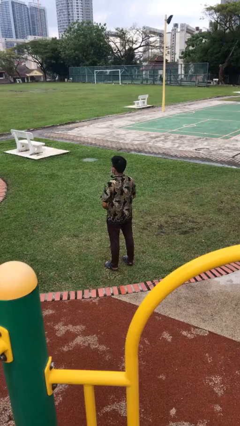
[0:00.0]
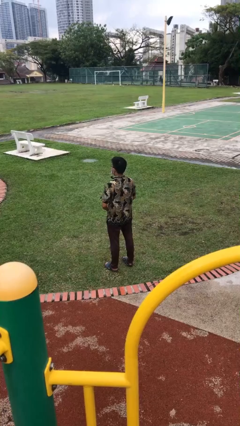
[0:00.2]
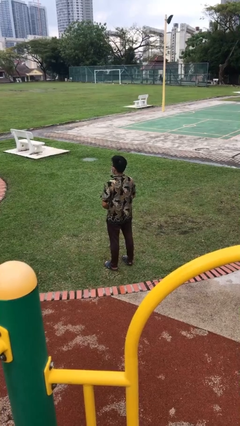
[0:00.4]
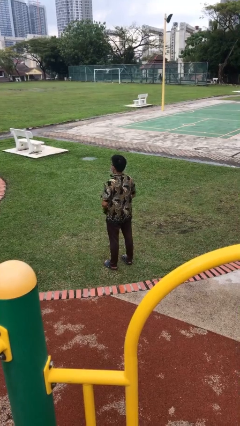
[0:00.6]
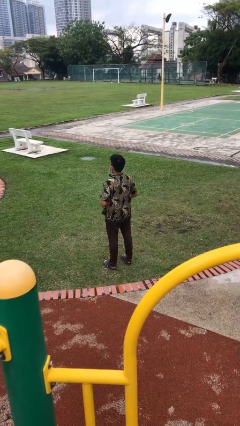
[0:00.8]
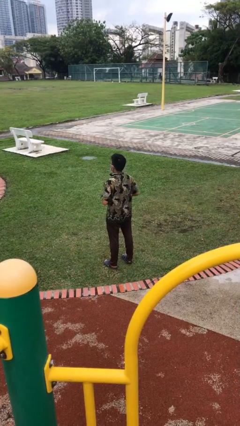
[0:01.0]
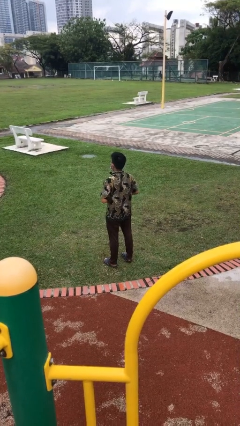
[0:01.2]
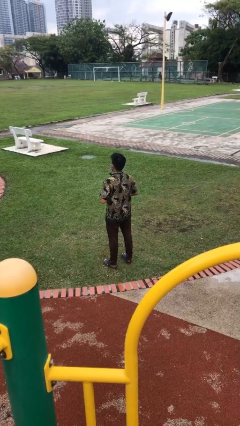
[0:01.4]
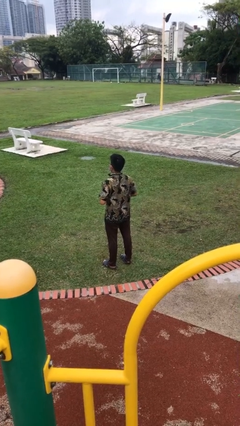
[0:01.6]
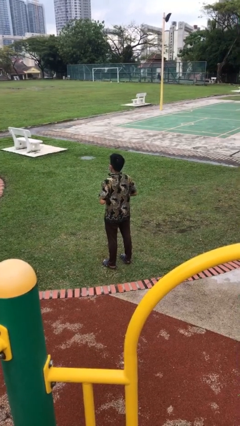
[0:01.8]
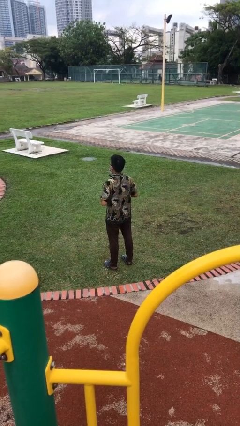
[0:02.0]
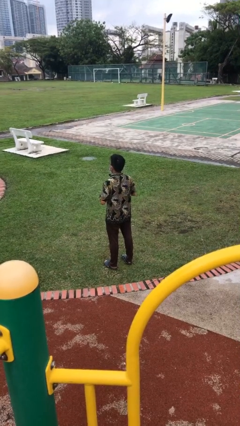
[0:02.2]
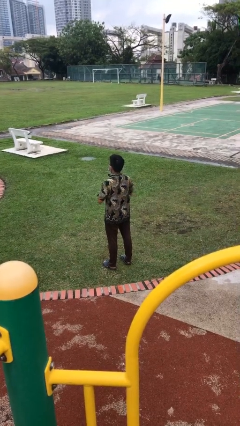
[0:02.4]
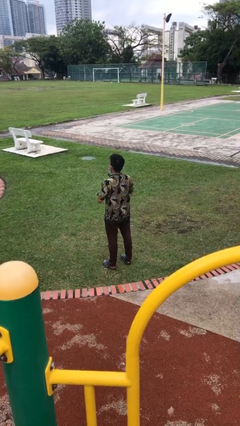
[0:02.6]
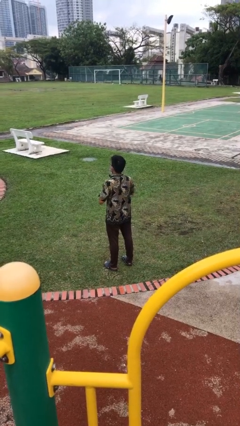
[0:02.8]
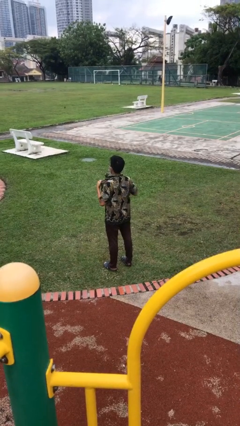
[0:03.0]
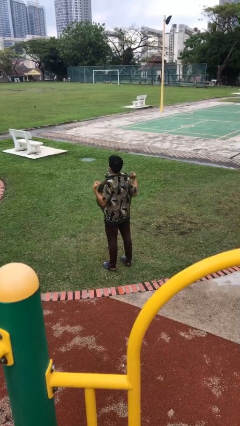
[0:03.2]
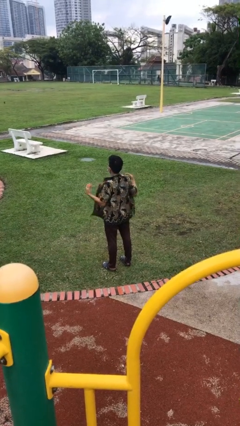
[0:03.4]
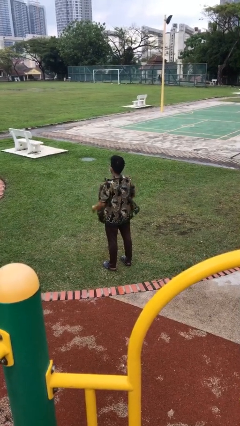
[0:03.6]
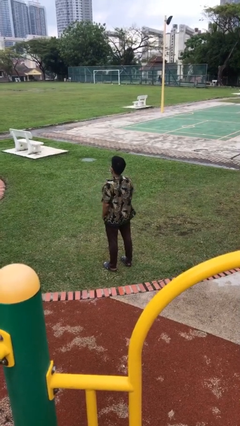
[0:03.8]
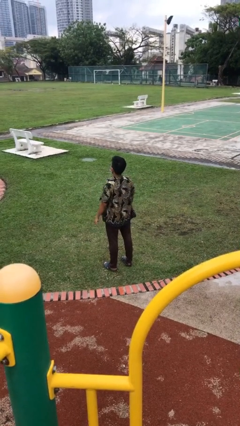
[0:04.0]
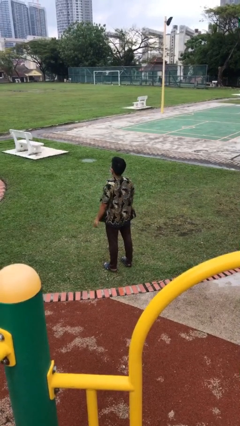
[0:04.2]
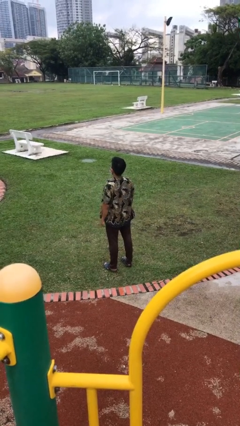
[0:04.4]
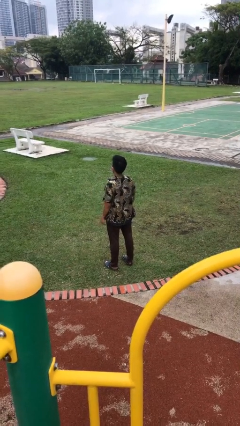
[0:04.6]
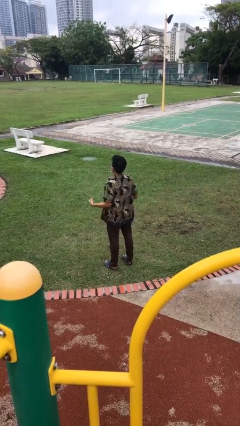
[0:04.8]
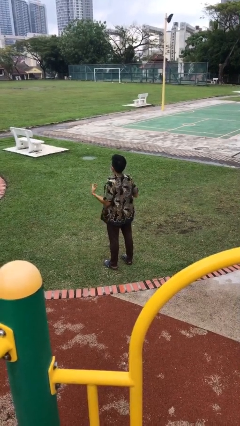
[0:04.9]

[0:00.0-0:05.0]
person unbuttons shirt

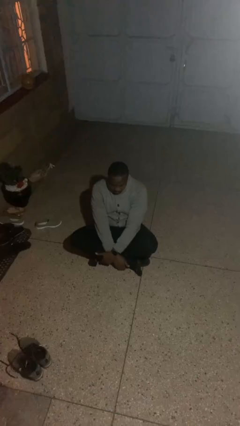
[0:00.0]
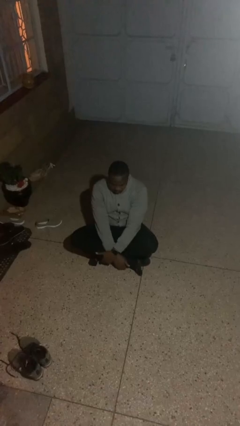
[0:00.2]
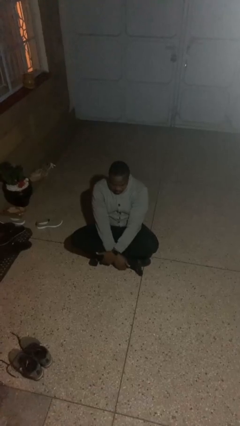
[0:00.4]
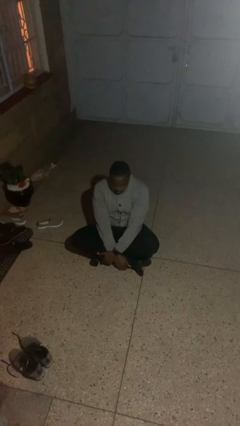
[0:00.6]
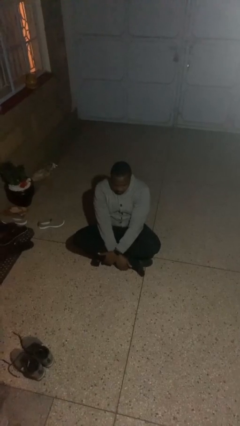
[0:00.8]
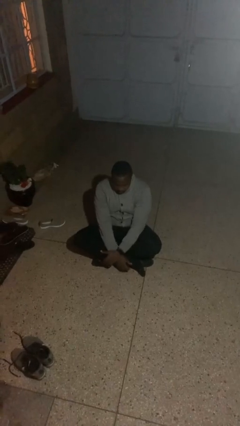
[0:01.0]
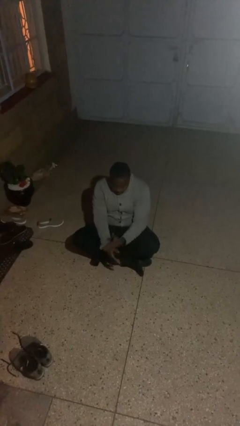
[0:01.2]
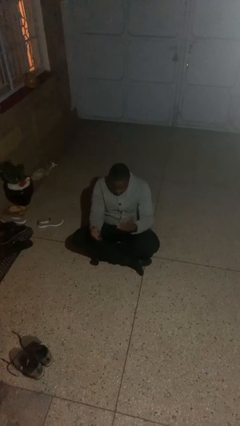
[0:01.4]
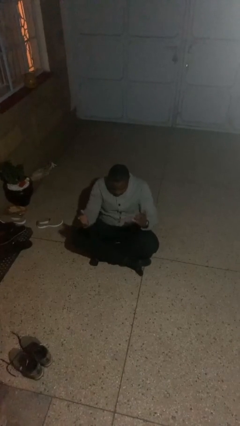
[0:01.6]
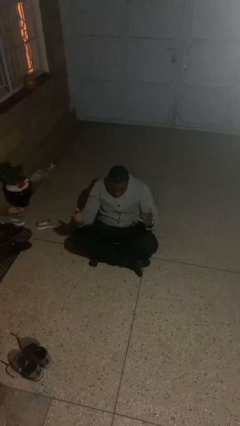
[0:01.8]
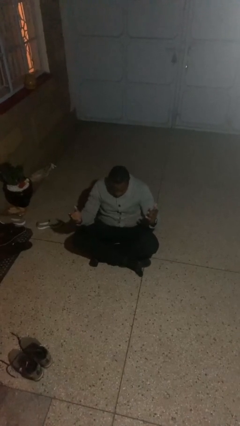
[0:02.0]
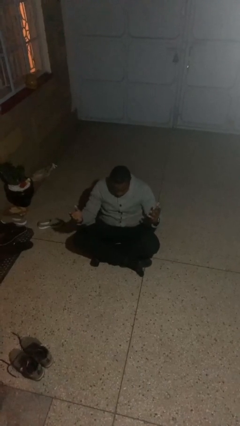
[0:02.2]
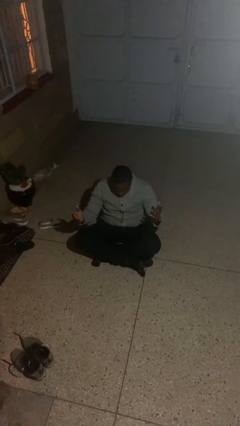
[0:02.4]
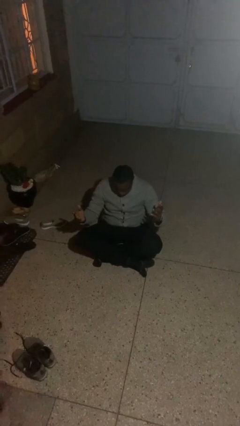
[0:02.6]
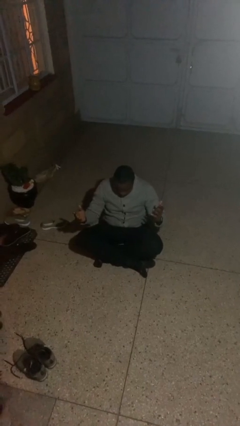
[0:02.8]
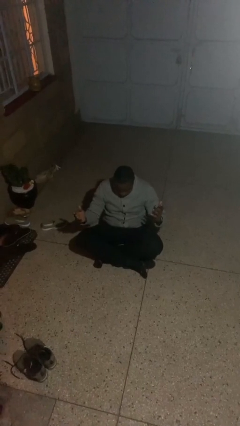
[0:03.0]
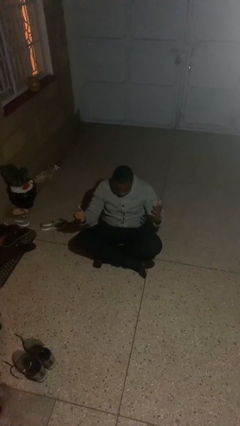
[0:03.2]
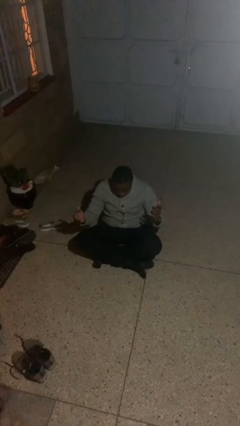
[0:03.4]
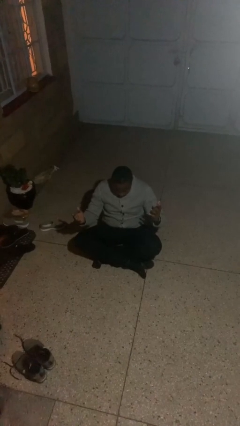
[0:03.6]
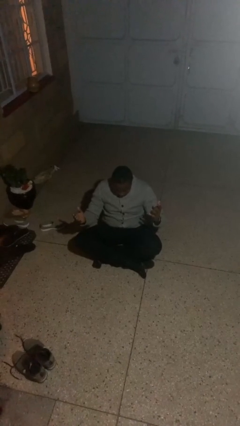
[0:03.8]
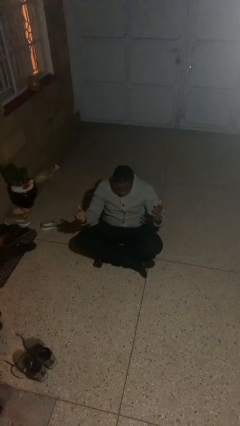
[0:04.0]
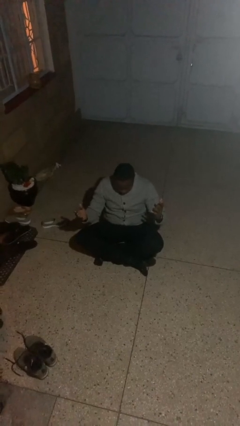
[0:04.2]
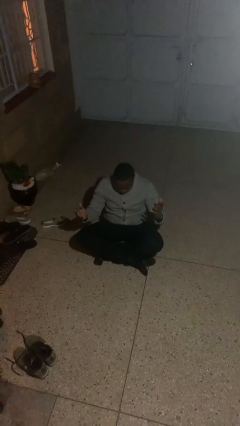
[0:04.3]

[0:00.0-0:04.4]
person prays

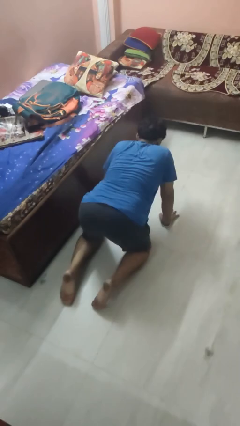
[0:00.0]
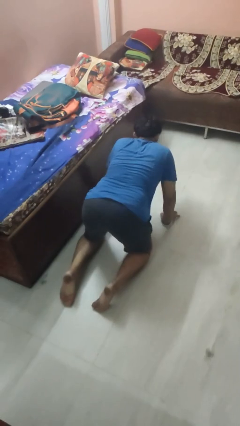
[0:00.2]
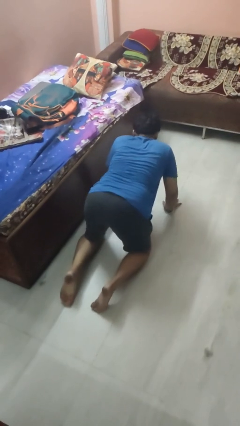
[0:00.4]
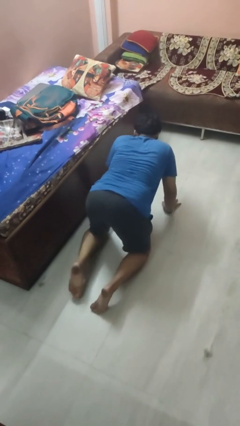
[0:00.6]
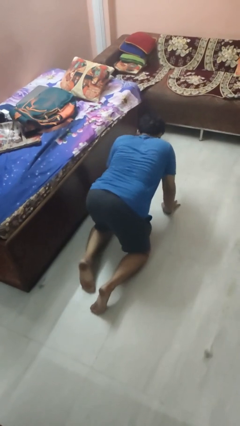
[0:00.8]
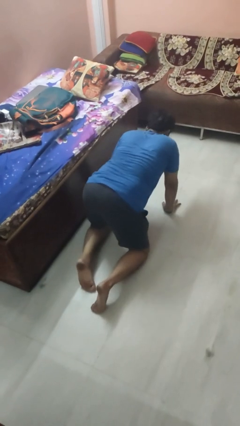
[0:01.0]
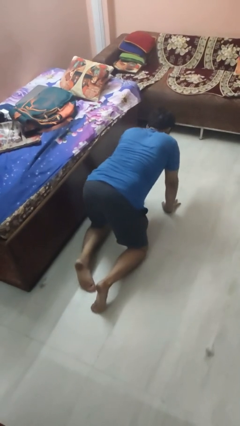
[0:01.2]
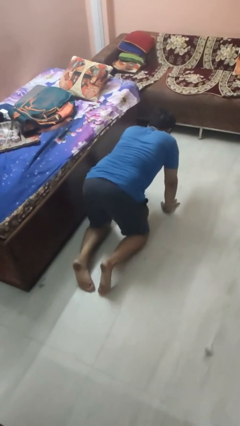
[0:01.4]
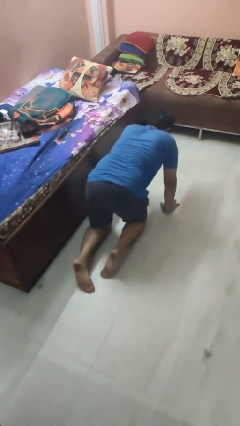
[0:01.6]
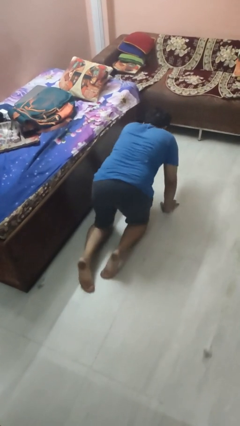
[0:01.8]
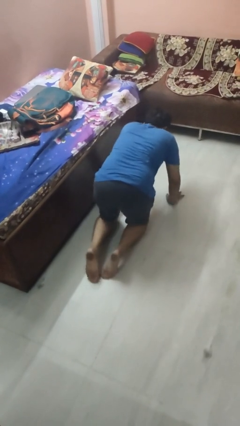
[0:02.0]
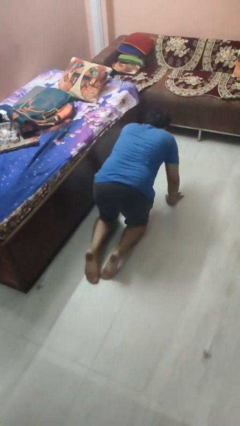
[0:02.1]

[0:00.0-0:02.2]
person crawls

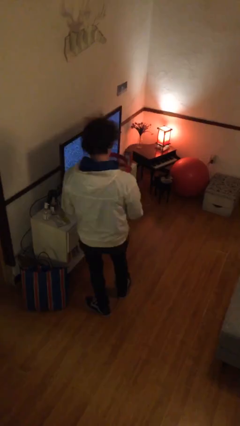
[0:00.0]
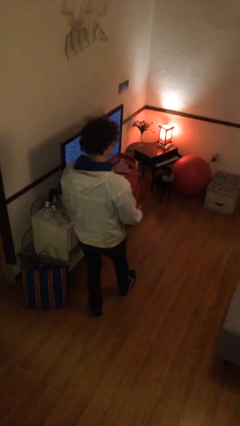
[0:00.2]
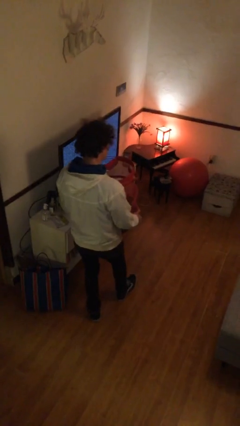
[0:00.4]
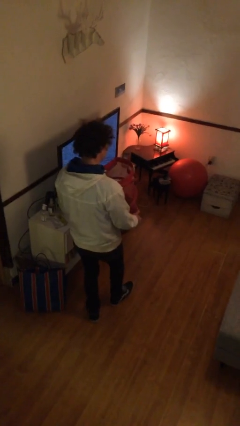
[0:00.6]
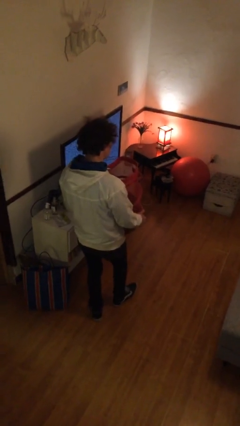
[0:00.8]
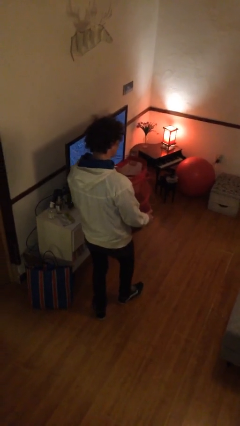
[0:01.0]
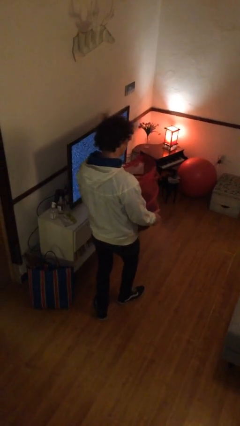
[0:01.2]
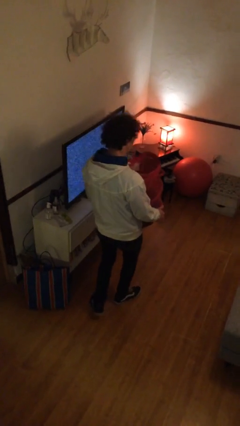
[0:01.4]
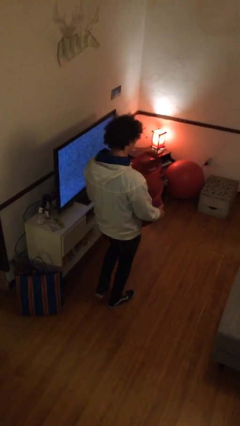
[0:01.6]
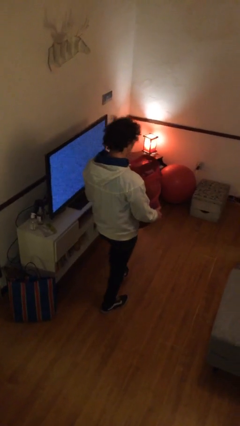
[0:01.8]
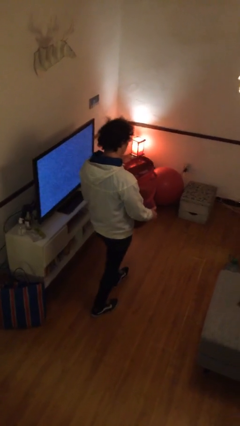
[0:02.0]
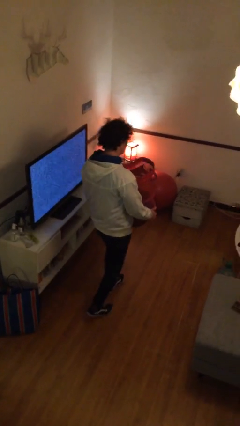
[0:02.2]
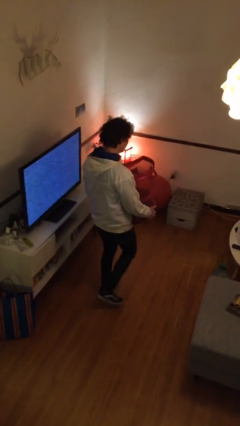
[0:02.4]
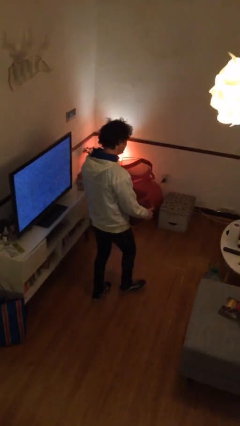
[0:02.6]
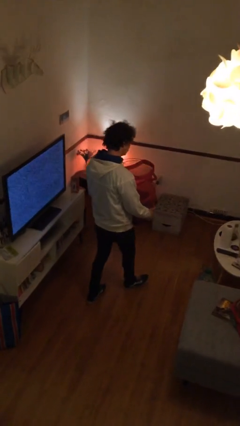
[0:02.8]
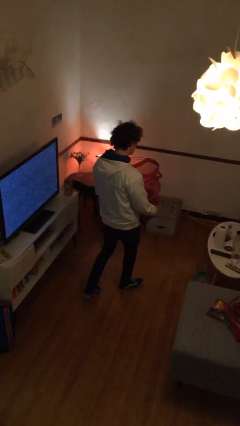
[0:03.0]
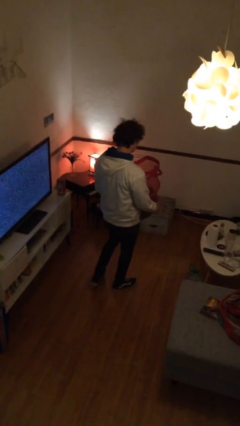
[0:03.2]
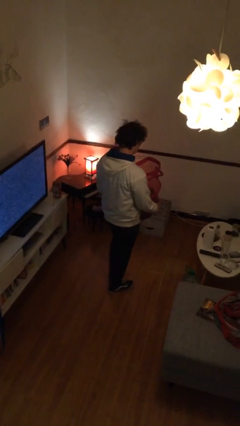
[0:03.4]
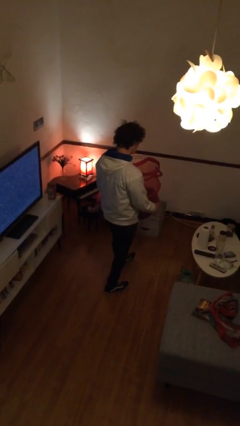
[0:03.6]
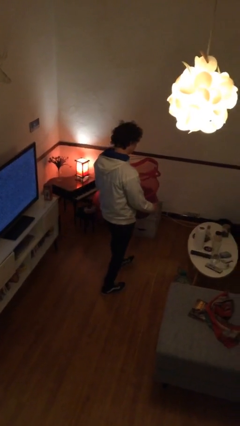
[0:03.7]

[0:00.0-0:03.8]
person carries laundry basket

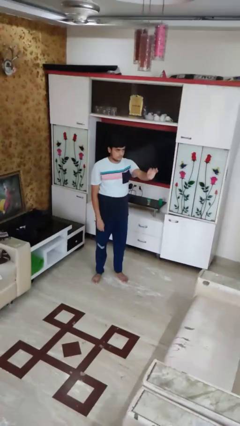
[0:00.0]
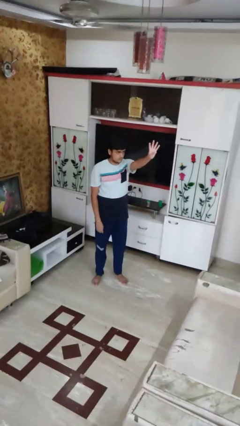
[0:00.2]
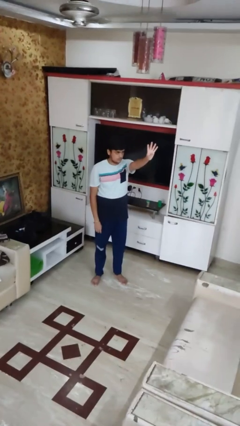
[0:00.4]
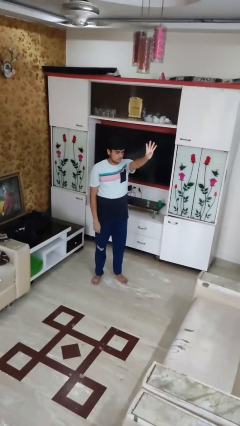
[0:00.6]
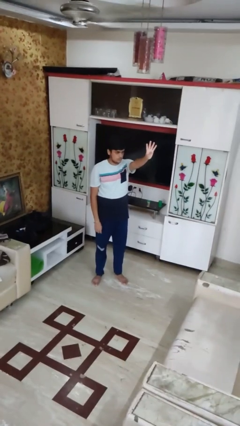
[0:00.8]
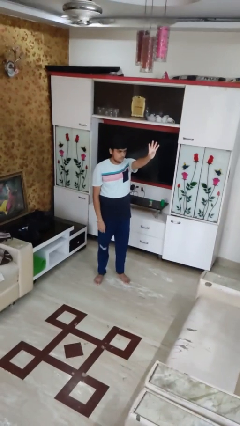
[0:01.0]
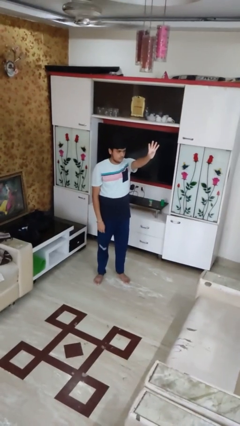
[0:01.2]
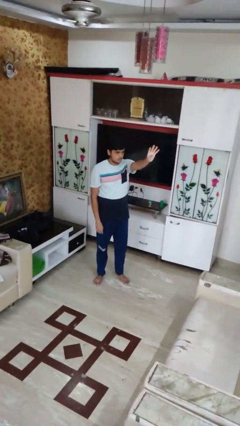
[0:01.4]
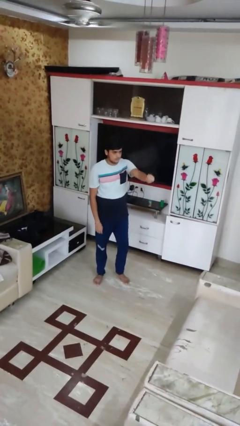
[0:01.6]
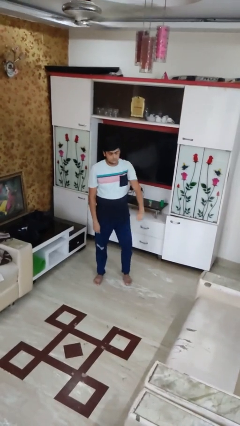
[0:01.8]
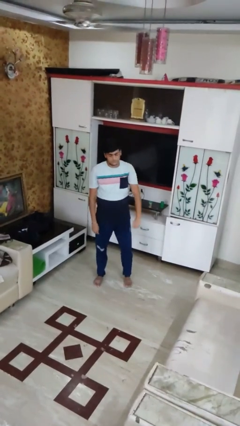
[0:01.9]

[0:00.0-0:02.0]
person gestures number four

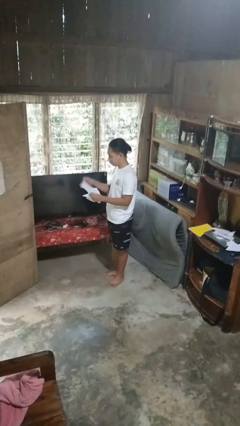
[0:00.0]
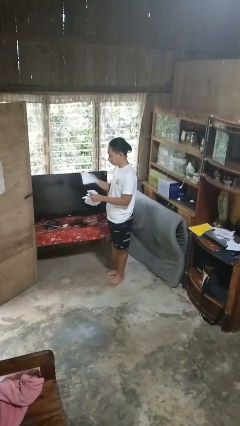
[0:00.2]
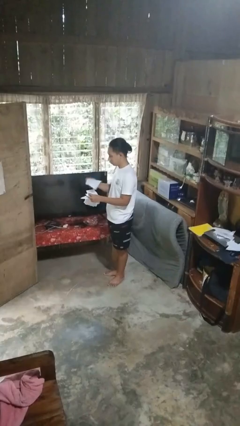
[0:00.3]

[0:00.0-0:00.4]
person tears paper
